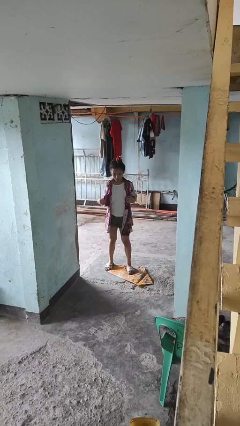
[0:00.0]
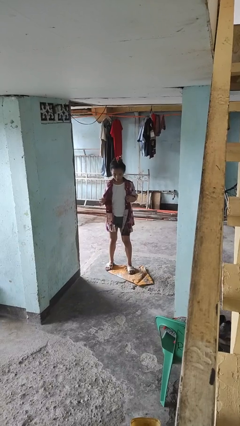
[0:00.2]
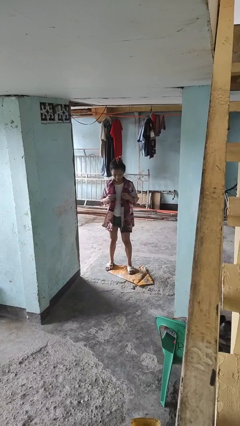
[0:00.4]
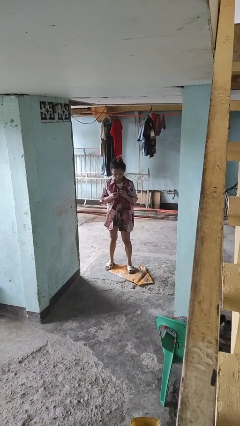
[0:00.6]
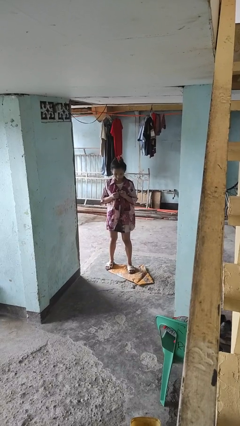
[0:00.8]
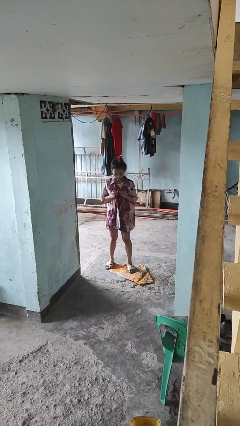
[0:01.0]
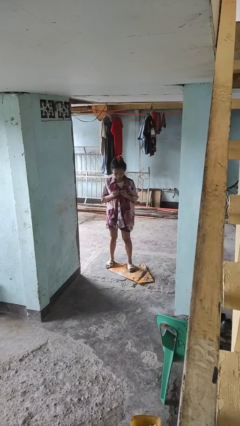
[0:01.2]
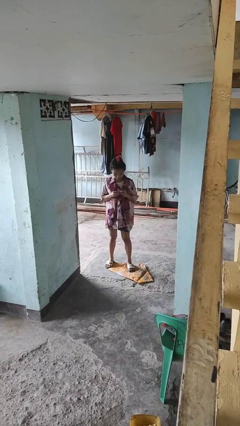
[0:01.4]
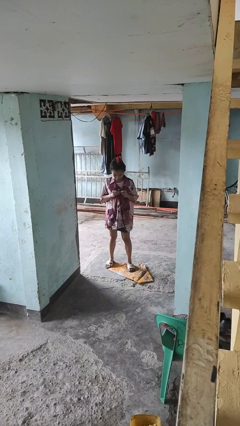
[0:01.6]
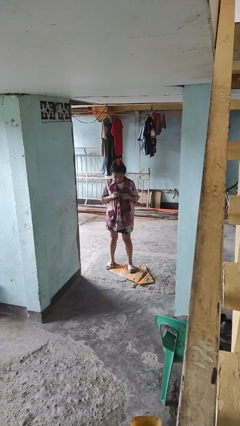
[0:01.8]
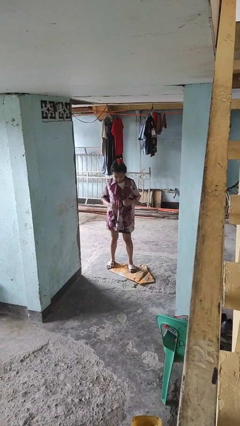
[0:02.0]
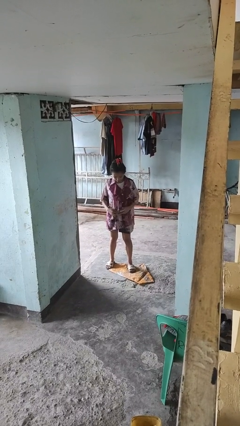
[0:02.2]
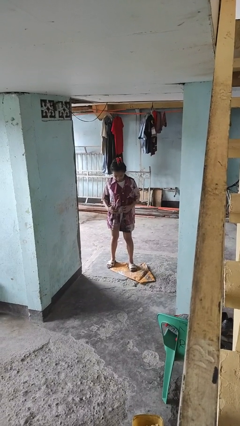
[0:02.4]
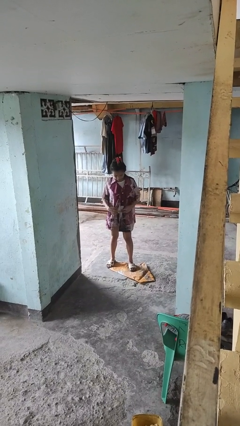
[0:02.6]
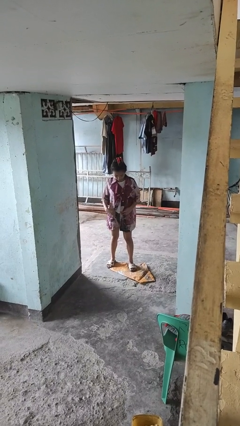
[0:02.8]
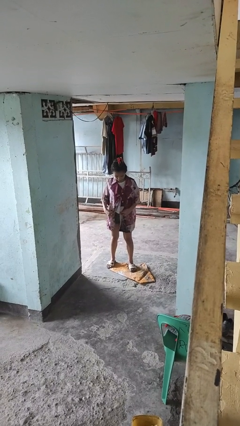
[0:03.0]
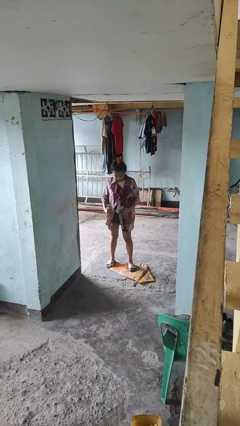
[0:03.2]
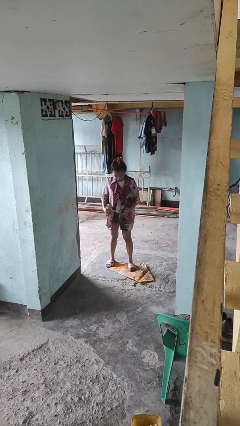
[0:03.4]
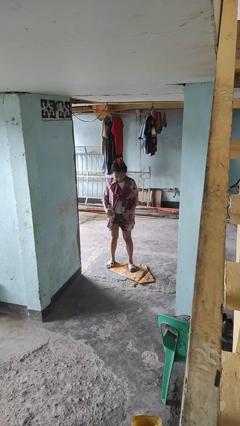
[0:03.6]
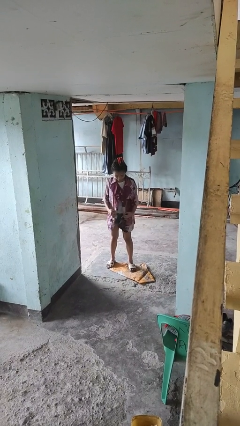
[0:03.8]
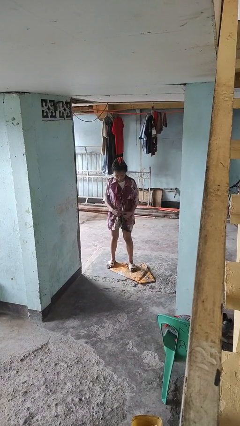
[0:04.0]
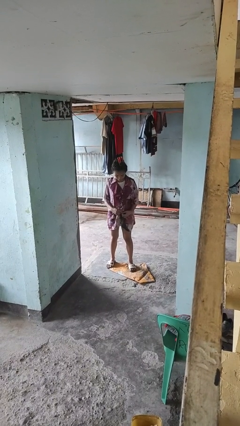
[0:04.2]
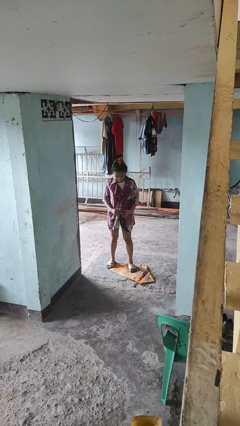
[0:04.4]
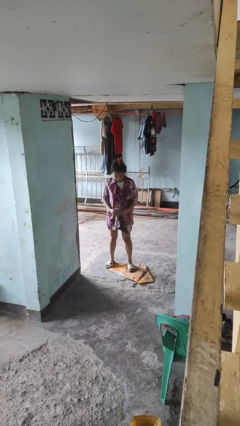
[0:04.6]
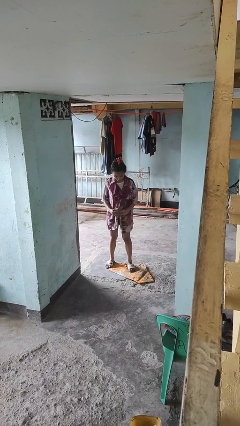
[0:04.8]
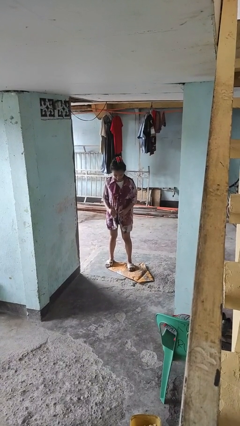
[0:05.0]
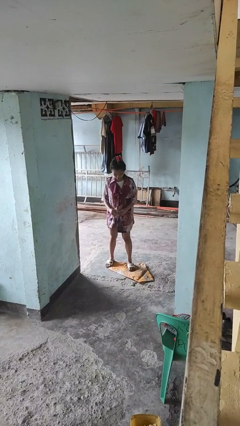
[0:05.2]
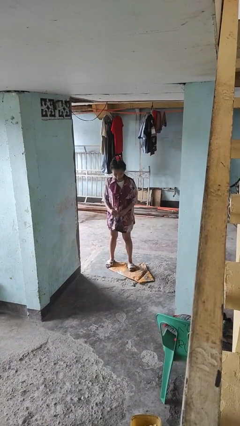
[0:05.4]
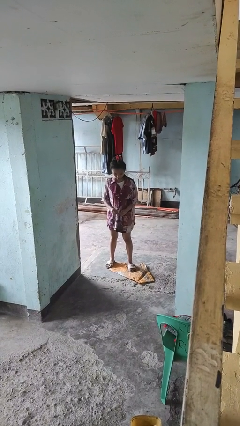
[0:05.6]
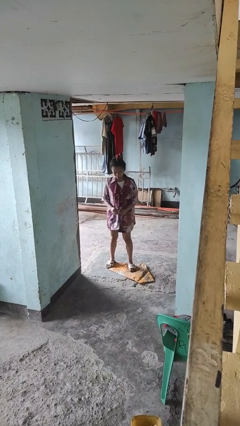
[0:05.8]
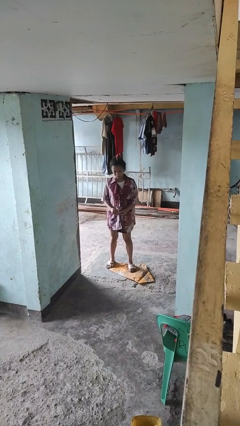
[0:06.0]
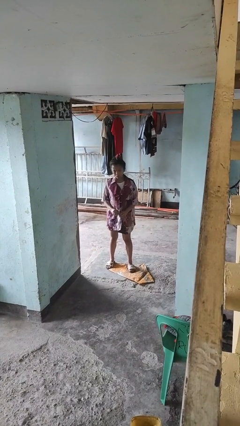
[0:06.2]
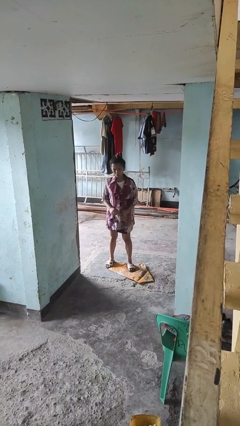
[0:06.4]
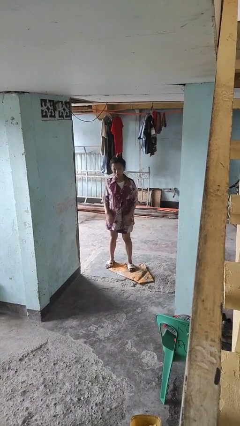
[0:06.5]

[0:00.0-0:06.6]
person buttons shirt

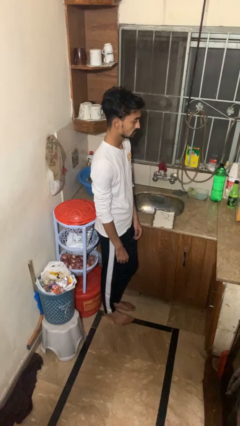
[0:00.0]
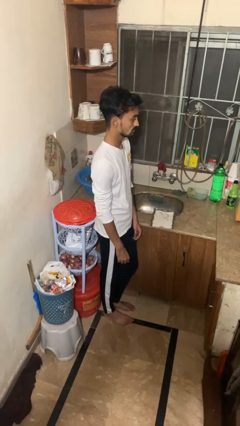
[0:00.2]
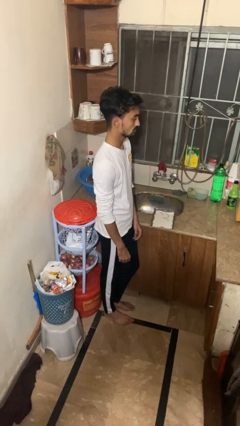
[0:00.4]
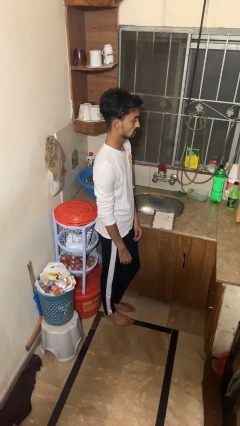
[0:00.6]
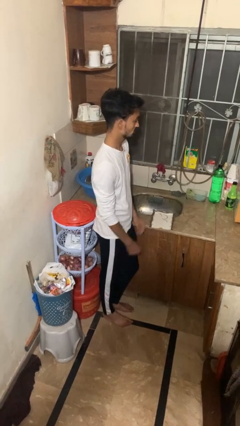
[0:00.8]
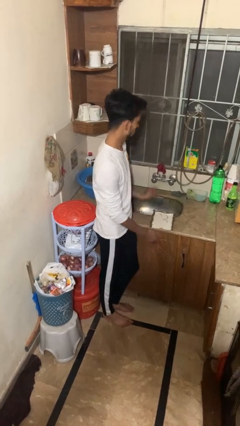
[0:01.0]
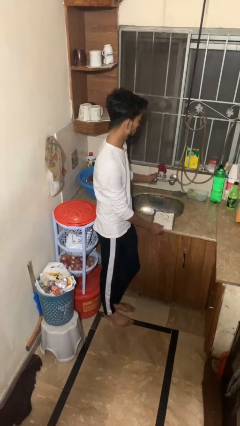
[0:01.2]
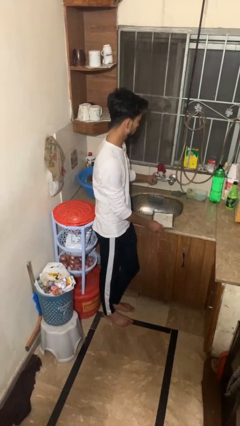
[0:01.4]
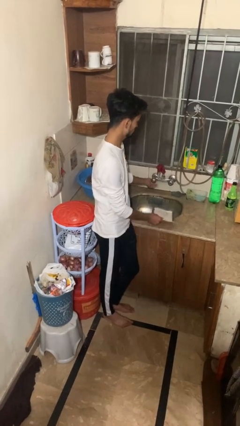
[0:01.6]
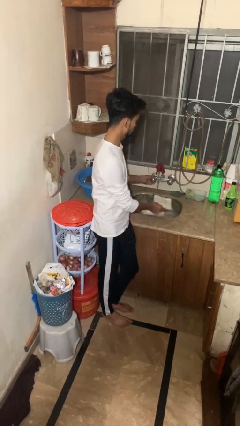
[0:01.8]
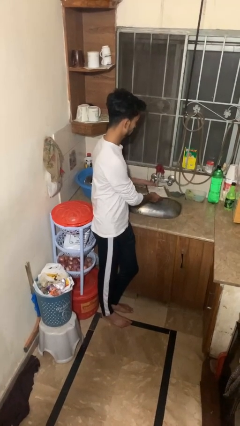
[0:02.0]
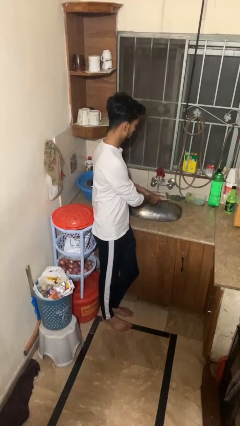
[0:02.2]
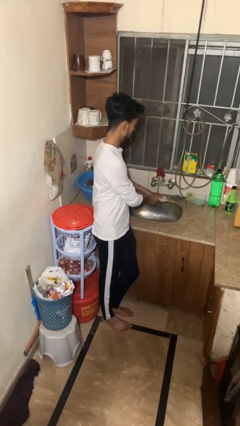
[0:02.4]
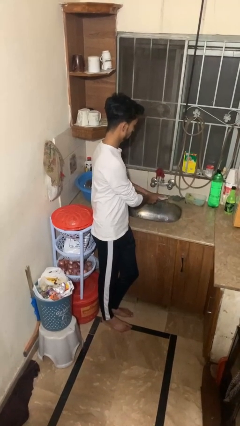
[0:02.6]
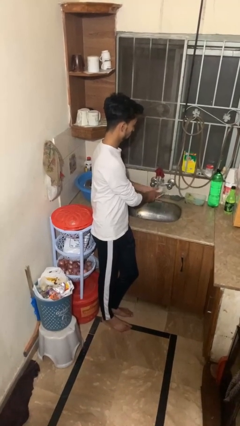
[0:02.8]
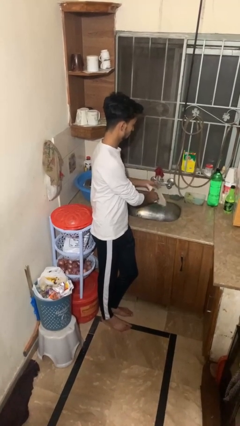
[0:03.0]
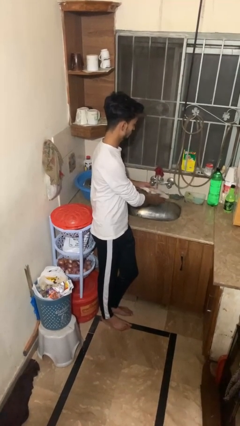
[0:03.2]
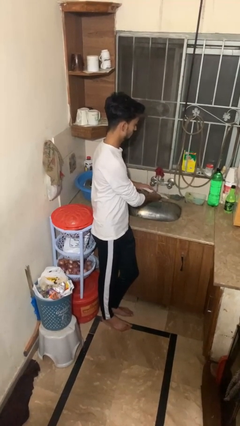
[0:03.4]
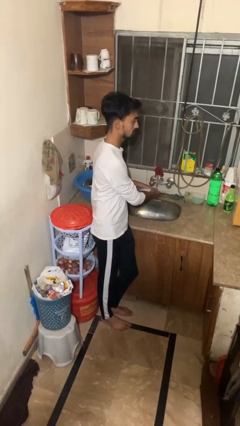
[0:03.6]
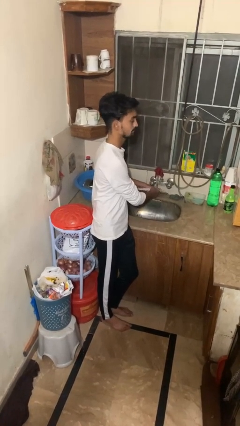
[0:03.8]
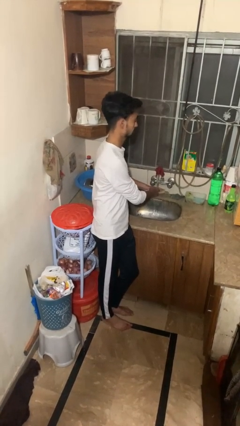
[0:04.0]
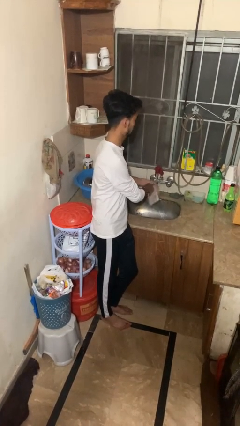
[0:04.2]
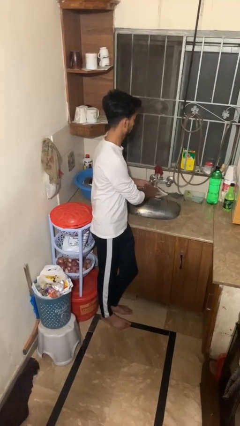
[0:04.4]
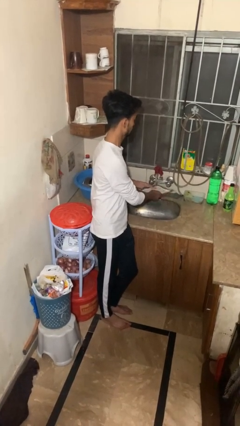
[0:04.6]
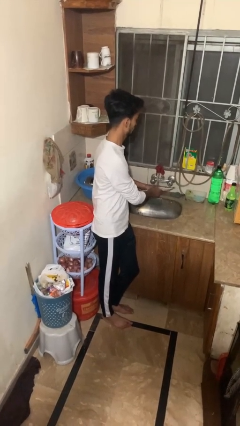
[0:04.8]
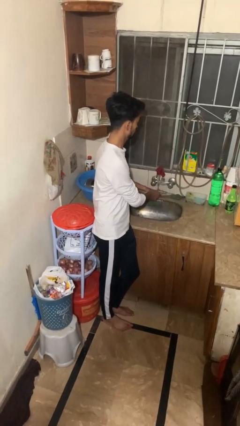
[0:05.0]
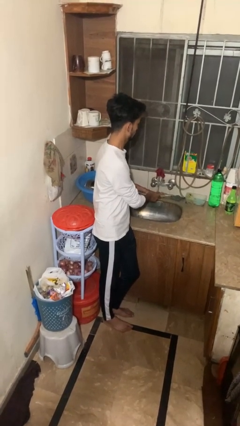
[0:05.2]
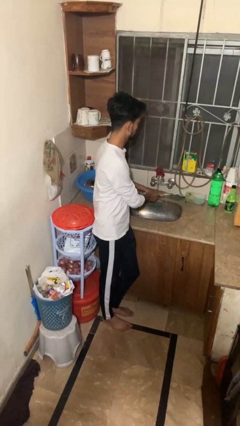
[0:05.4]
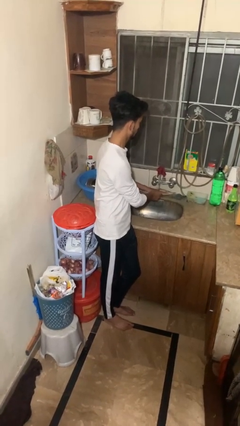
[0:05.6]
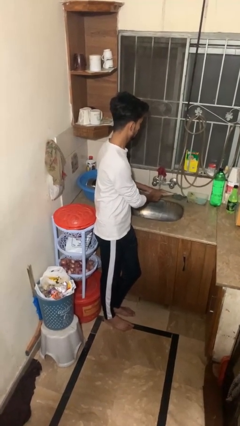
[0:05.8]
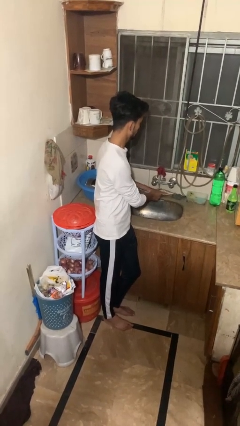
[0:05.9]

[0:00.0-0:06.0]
person opens dishwasher

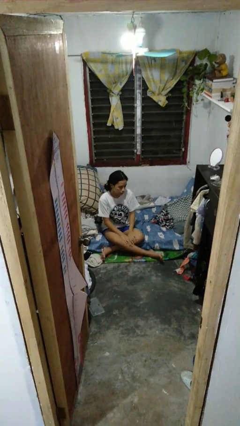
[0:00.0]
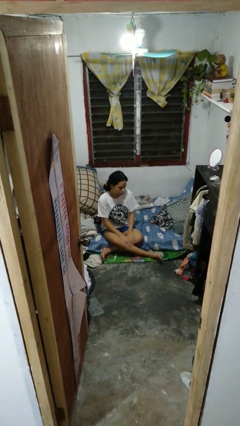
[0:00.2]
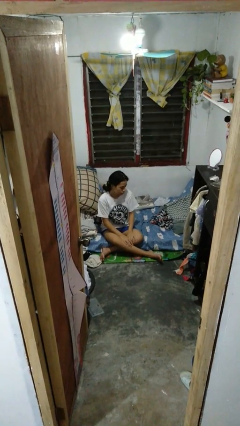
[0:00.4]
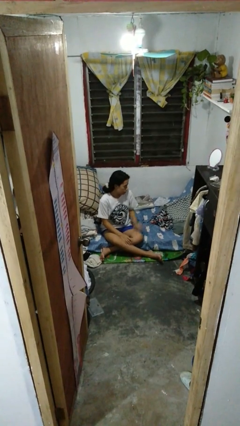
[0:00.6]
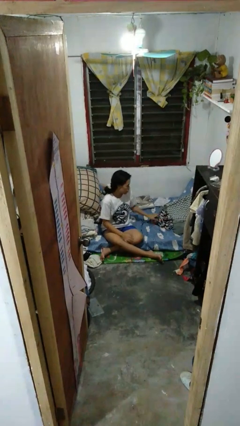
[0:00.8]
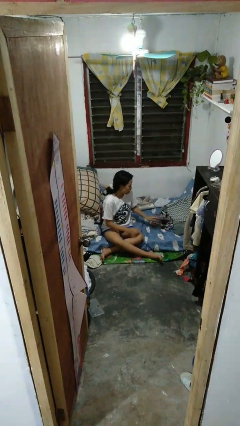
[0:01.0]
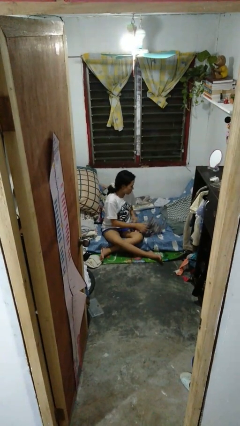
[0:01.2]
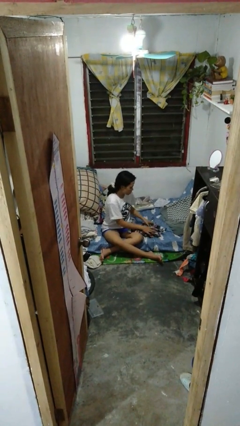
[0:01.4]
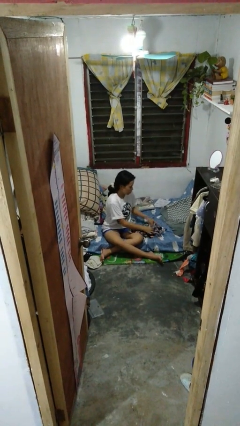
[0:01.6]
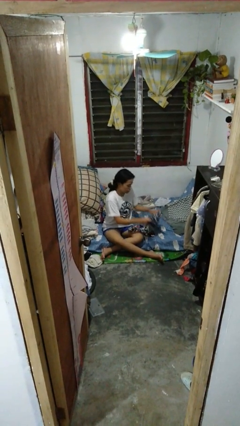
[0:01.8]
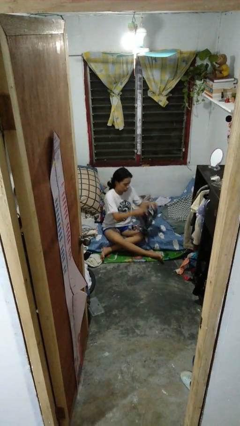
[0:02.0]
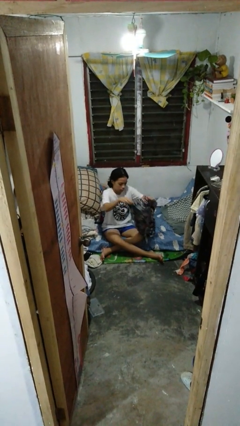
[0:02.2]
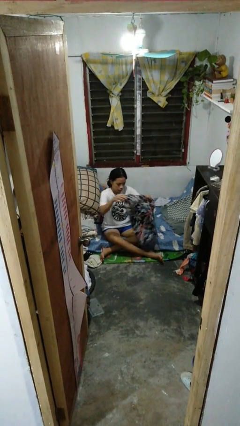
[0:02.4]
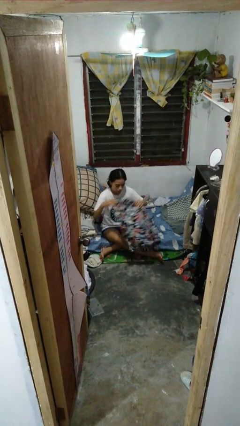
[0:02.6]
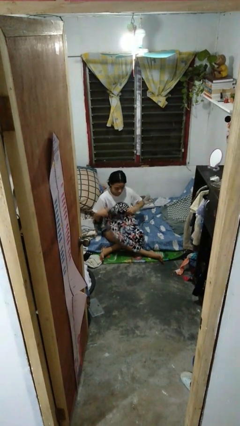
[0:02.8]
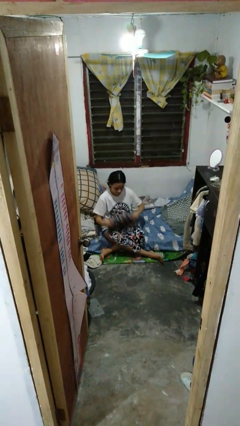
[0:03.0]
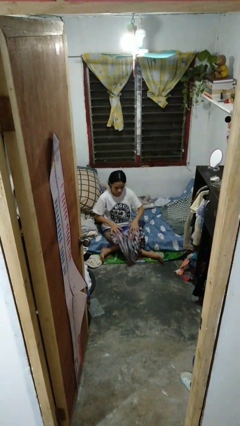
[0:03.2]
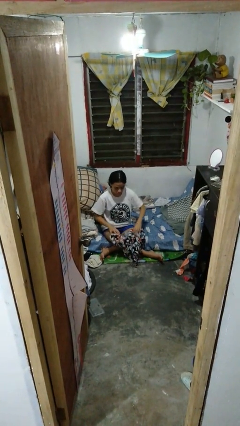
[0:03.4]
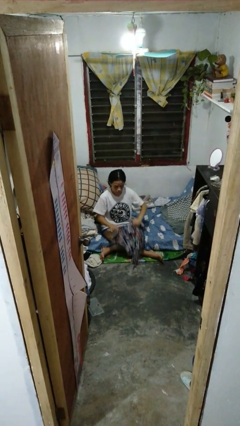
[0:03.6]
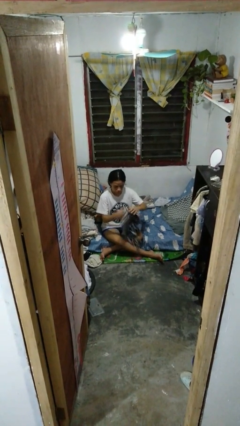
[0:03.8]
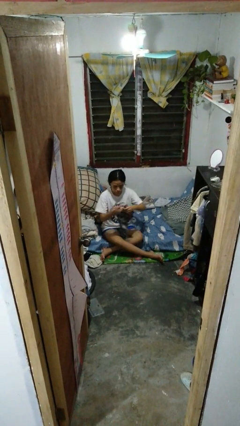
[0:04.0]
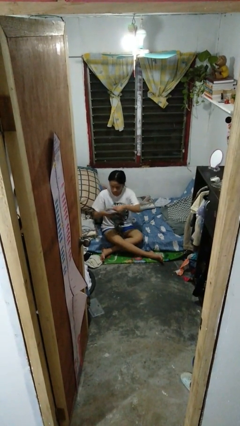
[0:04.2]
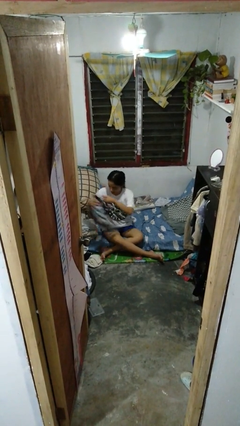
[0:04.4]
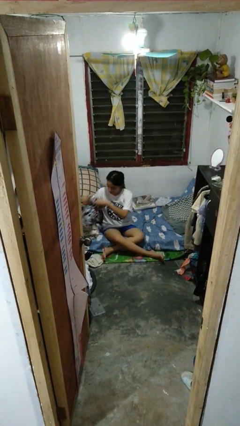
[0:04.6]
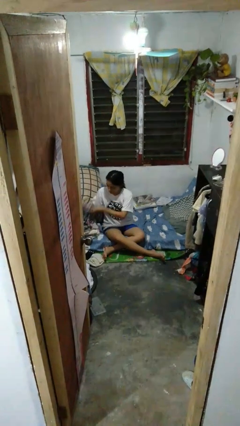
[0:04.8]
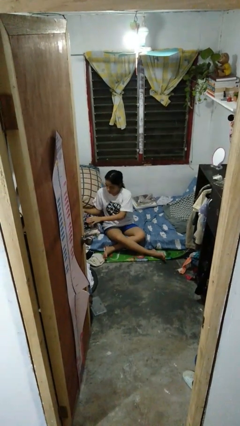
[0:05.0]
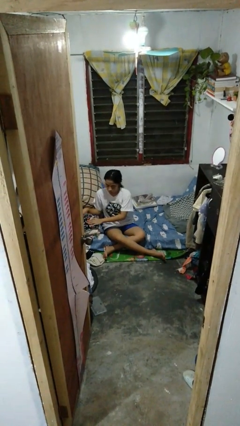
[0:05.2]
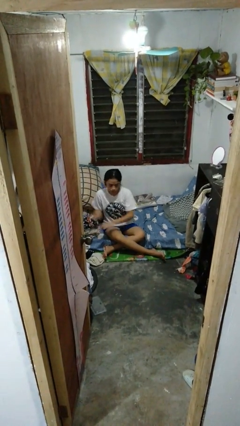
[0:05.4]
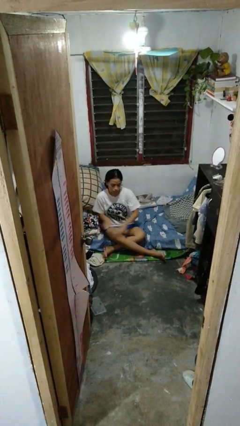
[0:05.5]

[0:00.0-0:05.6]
person folds shirt

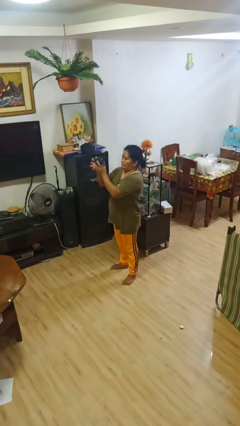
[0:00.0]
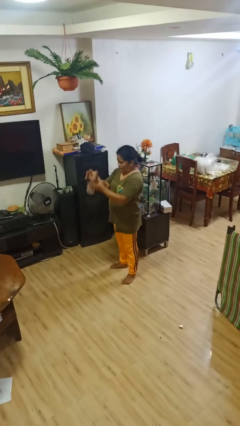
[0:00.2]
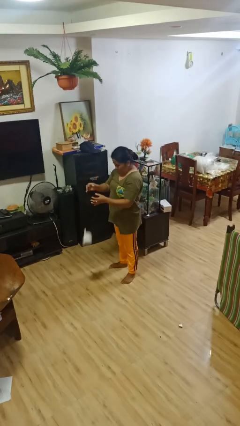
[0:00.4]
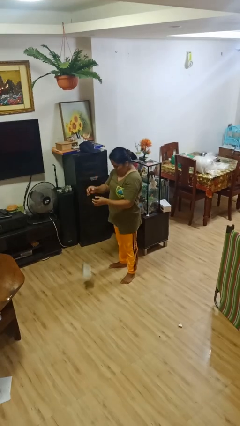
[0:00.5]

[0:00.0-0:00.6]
person catches dropped object
